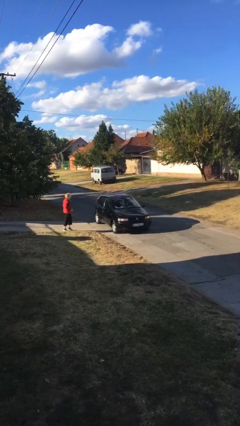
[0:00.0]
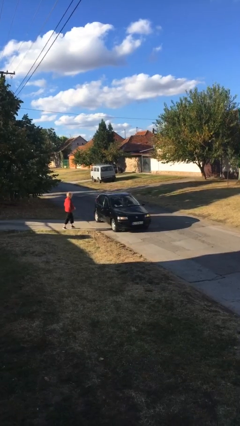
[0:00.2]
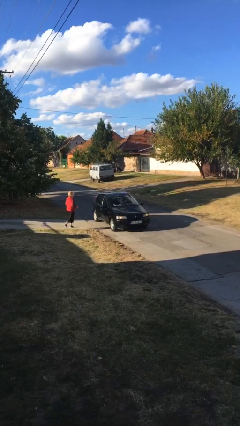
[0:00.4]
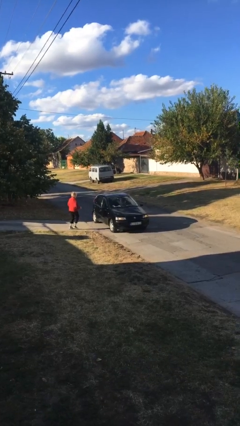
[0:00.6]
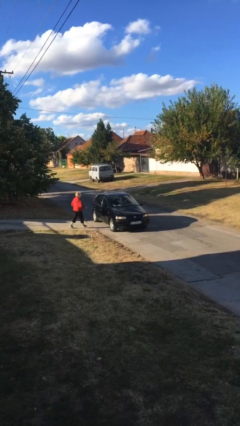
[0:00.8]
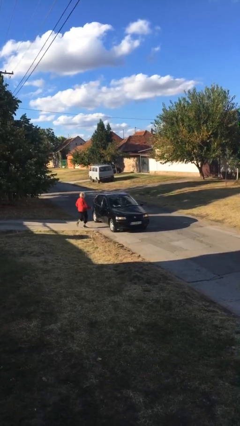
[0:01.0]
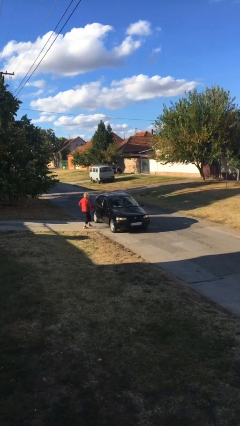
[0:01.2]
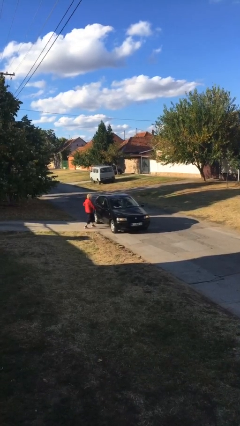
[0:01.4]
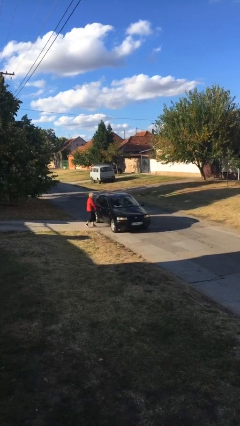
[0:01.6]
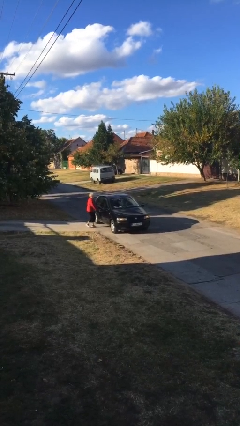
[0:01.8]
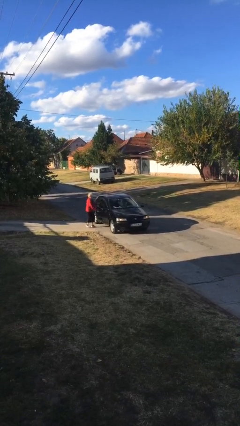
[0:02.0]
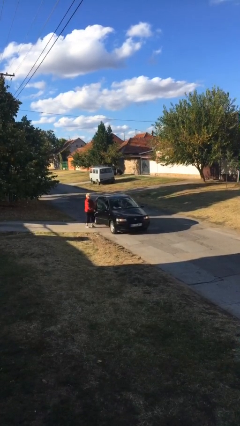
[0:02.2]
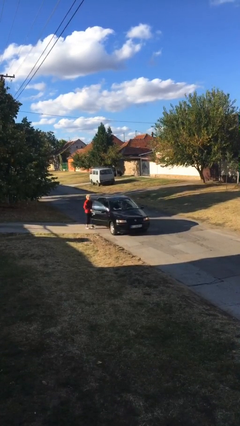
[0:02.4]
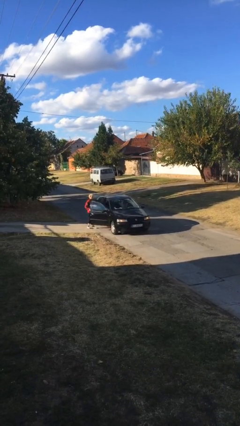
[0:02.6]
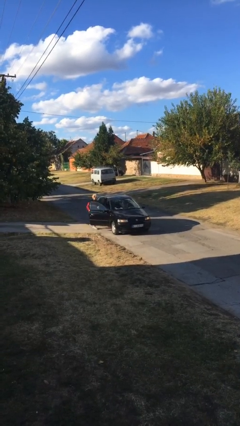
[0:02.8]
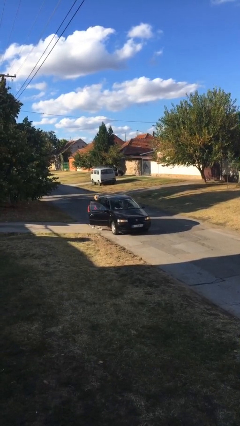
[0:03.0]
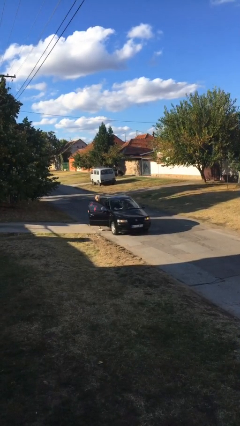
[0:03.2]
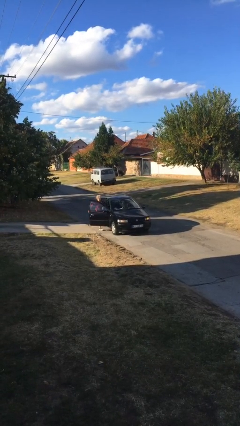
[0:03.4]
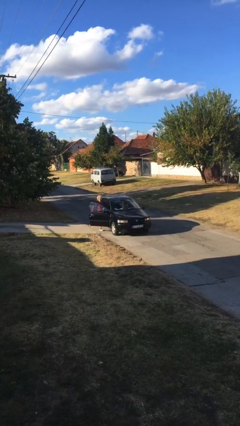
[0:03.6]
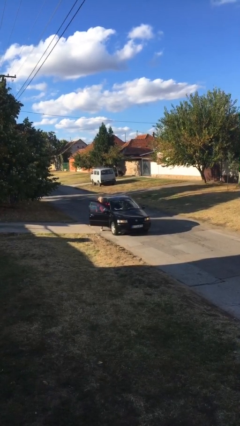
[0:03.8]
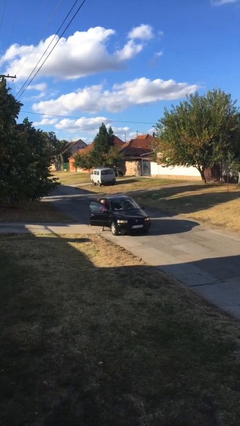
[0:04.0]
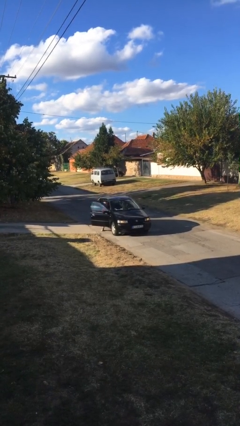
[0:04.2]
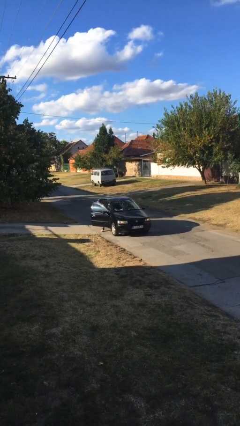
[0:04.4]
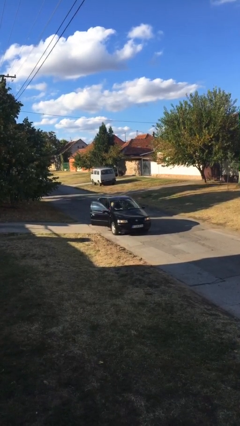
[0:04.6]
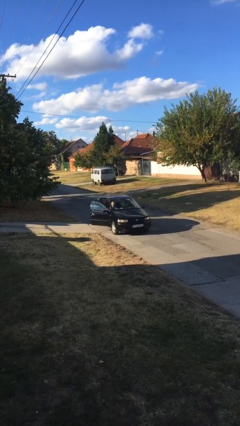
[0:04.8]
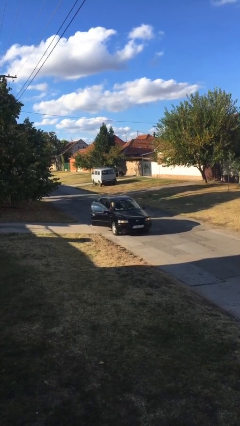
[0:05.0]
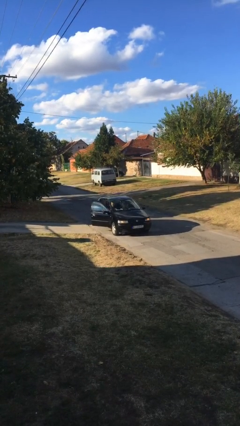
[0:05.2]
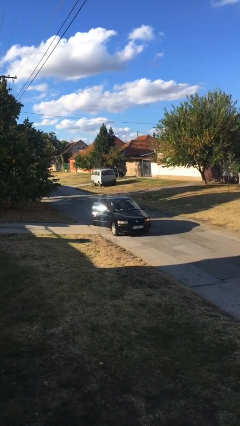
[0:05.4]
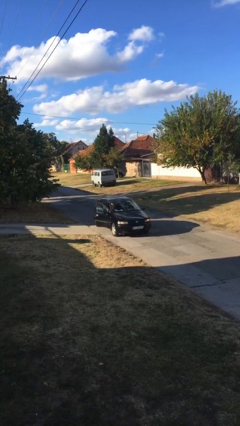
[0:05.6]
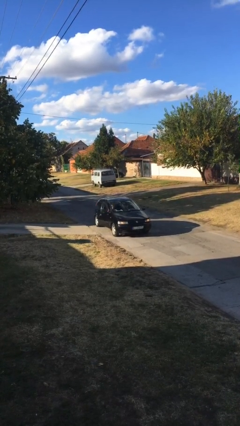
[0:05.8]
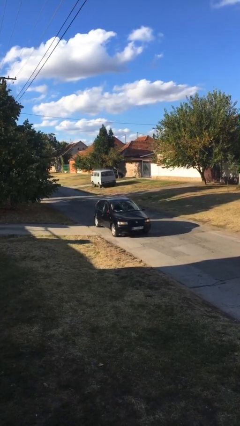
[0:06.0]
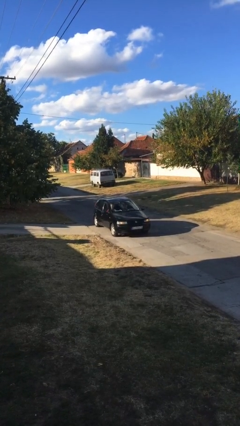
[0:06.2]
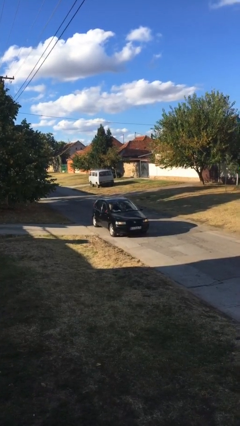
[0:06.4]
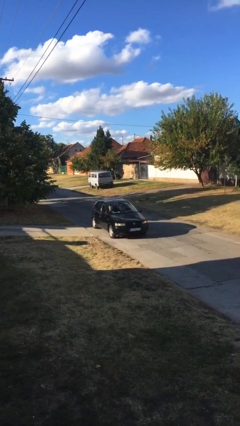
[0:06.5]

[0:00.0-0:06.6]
car picks up person

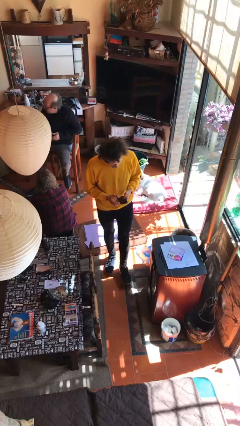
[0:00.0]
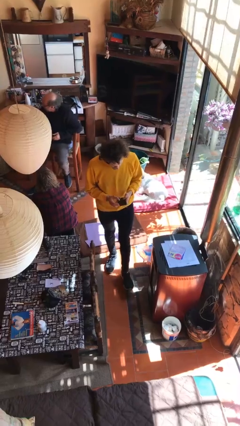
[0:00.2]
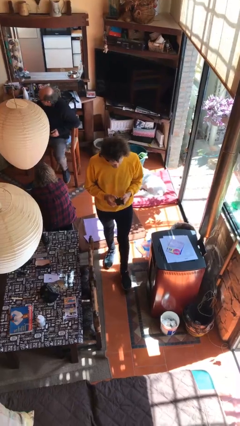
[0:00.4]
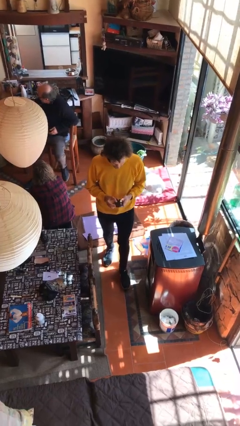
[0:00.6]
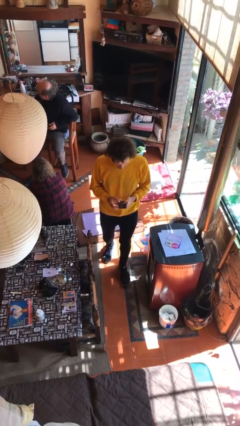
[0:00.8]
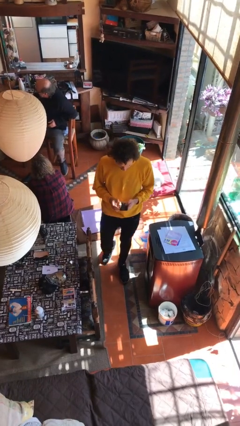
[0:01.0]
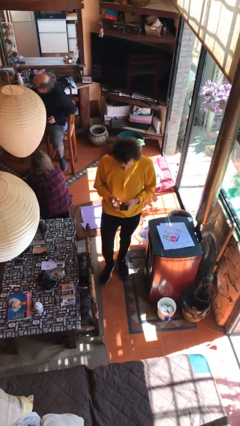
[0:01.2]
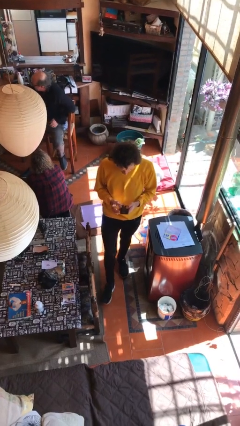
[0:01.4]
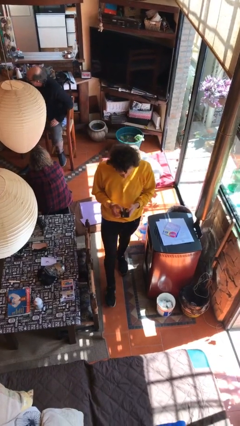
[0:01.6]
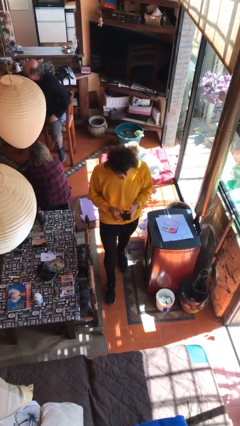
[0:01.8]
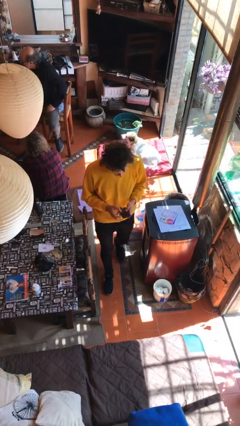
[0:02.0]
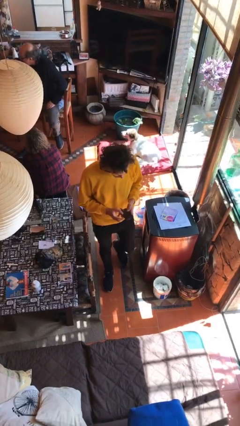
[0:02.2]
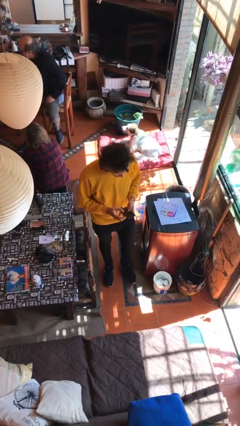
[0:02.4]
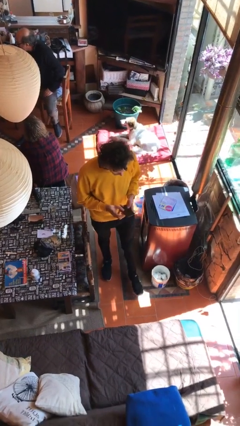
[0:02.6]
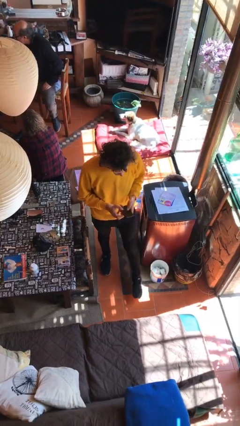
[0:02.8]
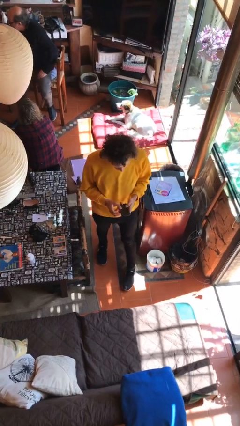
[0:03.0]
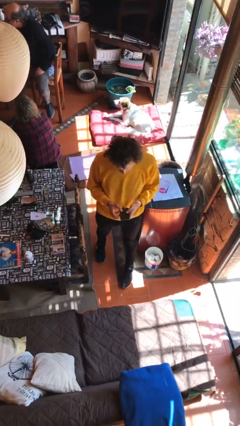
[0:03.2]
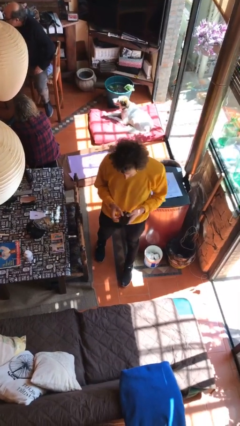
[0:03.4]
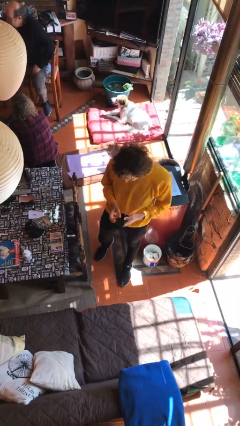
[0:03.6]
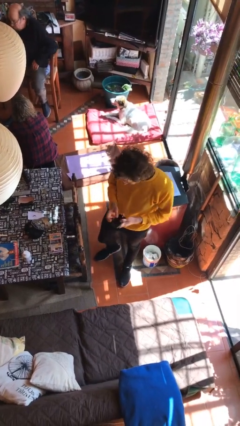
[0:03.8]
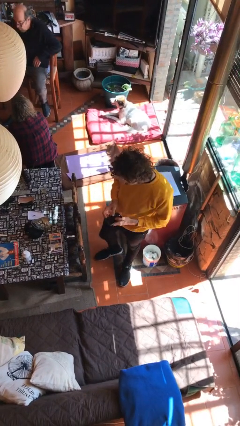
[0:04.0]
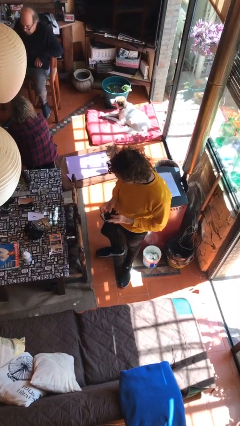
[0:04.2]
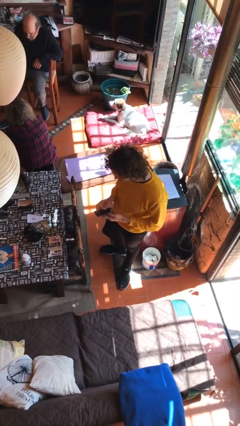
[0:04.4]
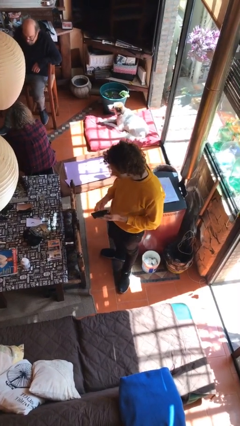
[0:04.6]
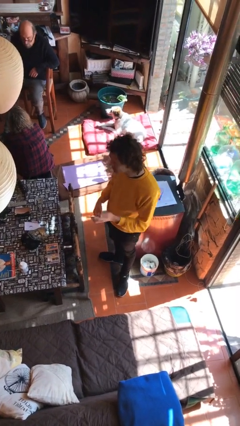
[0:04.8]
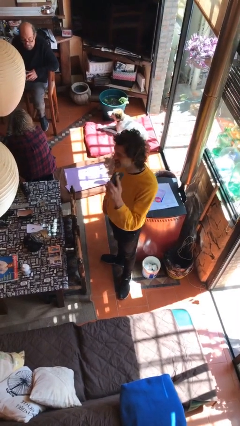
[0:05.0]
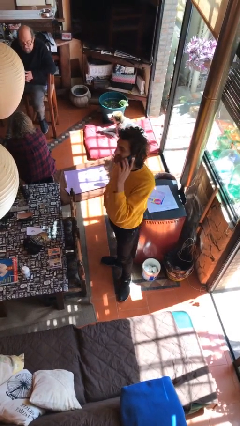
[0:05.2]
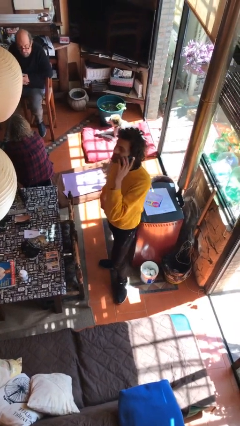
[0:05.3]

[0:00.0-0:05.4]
person texts on phone

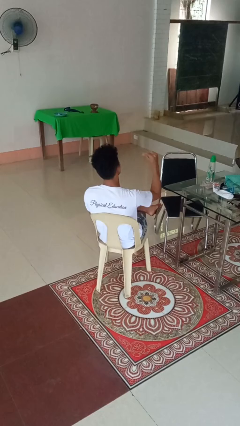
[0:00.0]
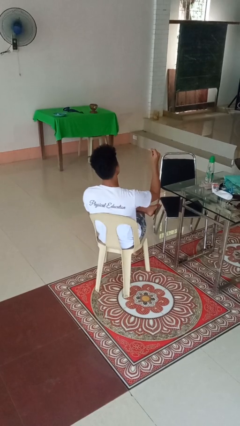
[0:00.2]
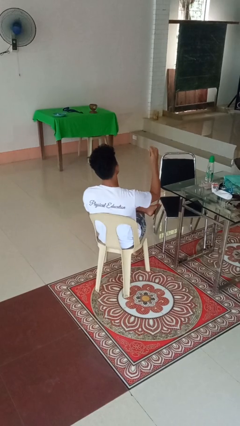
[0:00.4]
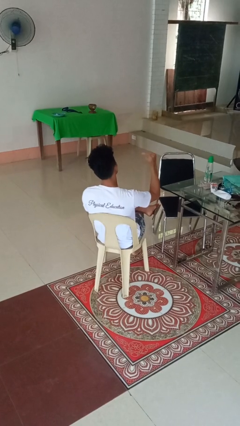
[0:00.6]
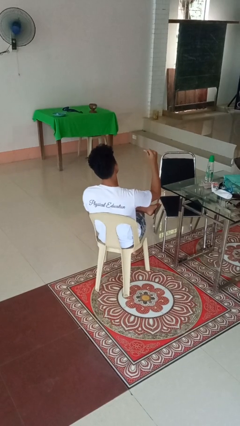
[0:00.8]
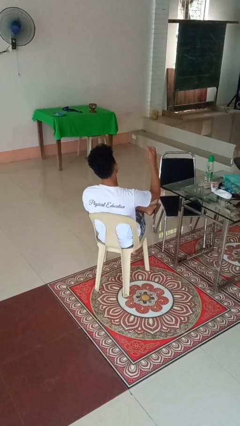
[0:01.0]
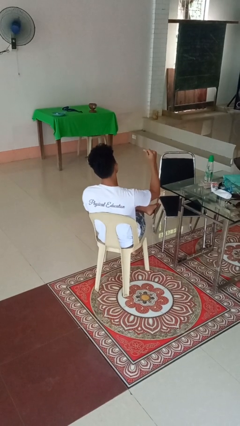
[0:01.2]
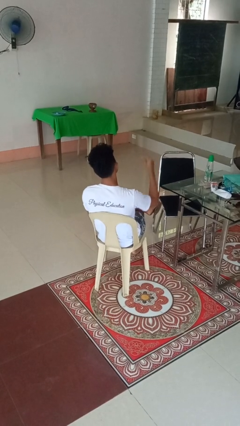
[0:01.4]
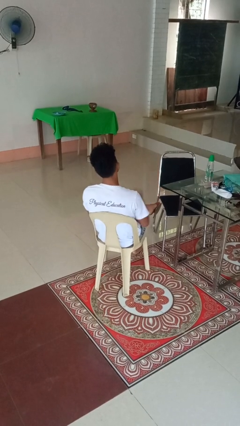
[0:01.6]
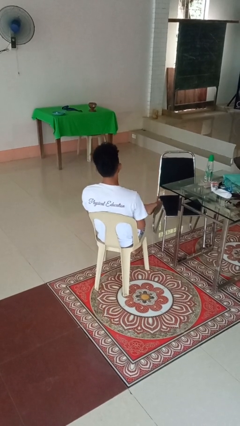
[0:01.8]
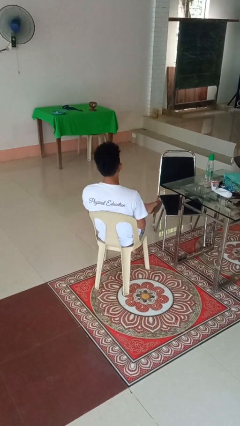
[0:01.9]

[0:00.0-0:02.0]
person snaps fingers

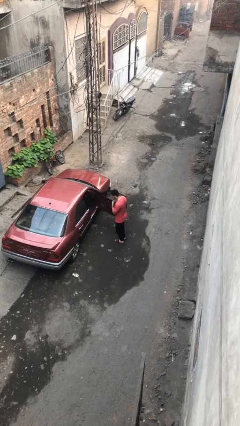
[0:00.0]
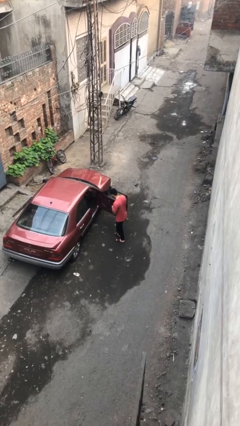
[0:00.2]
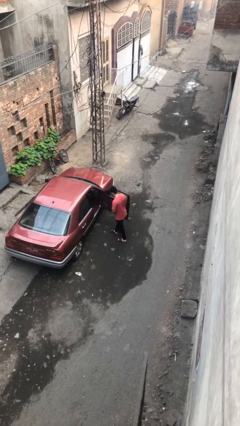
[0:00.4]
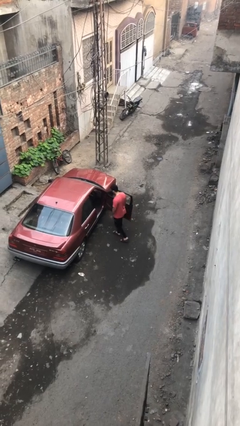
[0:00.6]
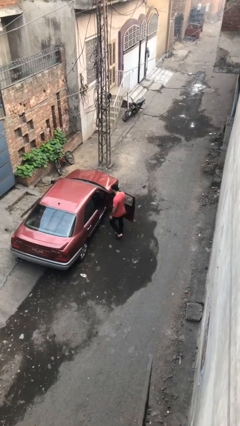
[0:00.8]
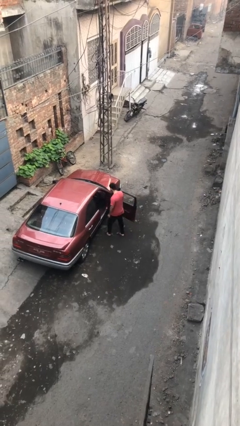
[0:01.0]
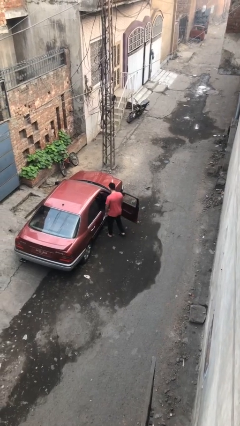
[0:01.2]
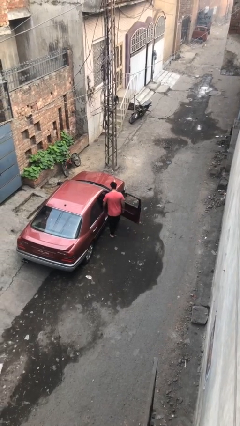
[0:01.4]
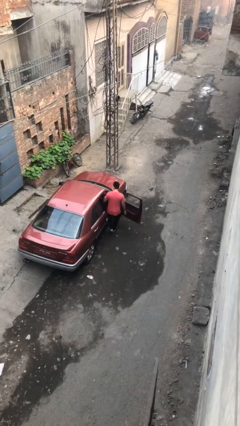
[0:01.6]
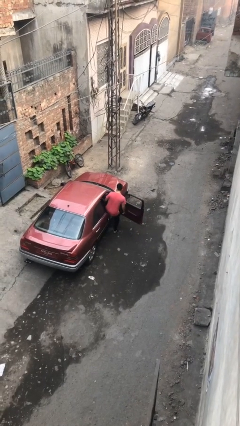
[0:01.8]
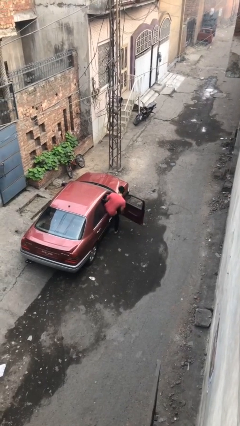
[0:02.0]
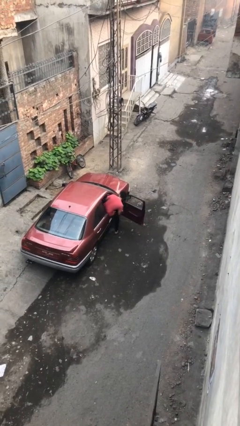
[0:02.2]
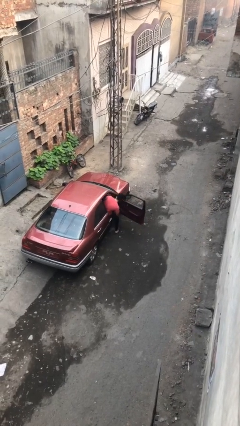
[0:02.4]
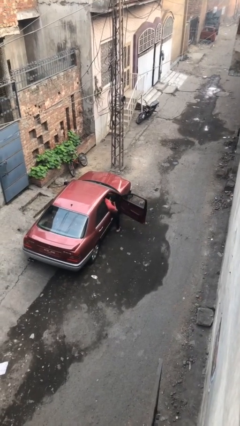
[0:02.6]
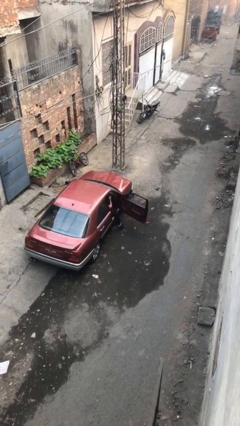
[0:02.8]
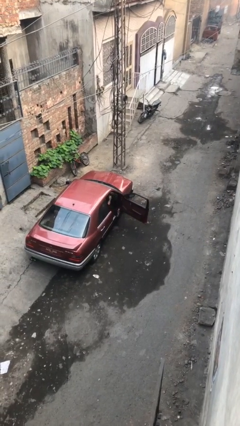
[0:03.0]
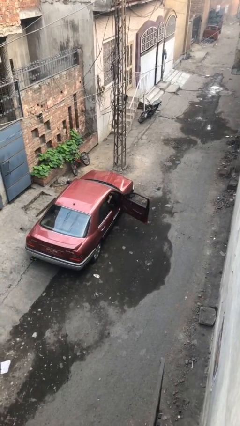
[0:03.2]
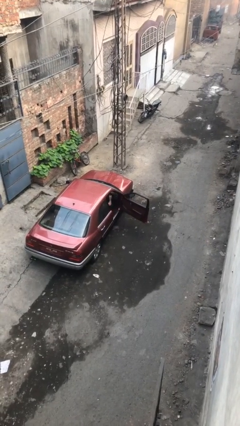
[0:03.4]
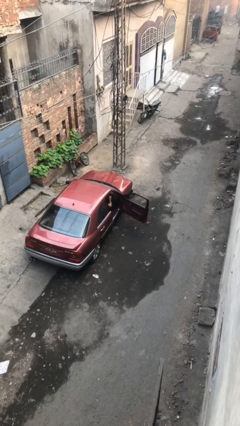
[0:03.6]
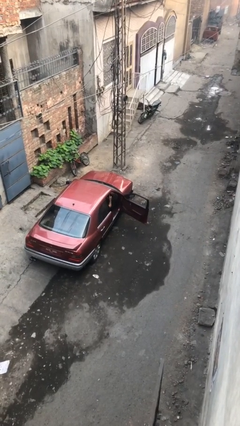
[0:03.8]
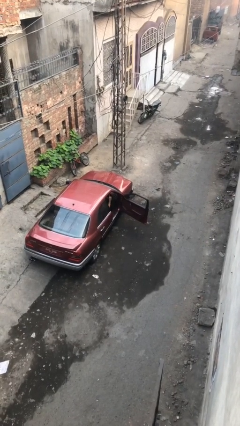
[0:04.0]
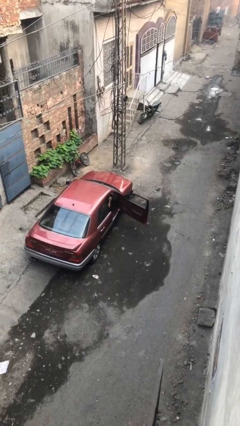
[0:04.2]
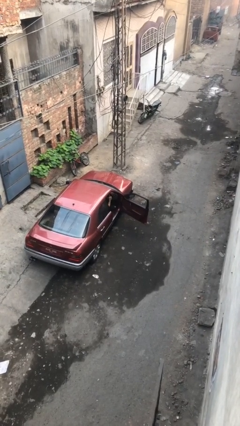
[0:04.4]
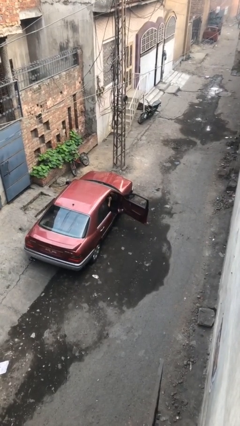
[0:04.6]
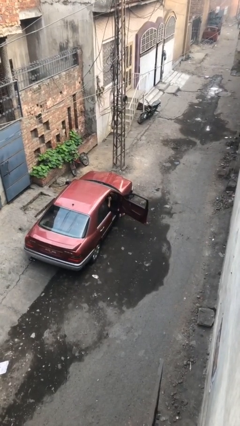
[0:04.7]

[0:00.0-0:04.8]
person enters car
